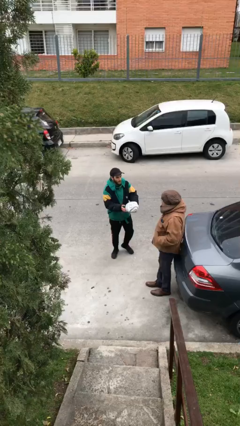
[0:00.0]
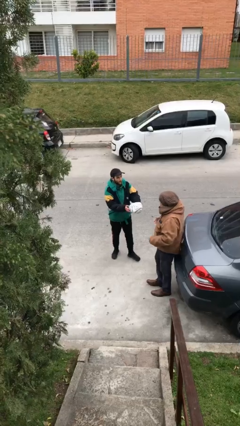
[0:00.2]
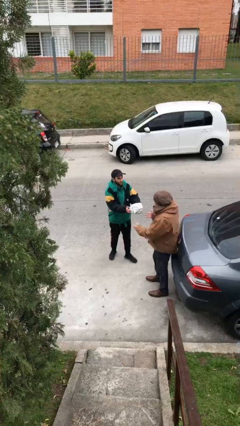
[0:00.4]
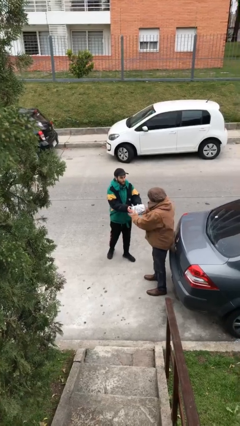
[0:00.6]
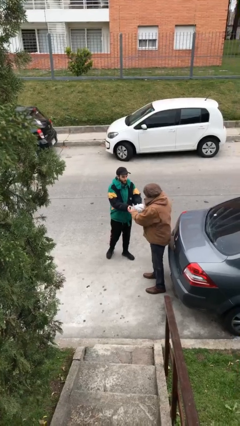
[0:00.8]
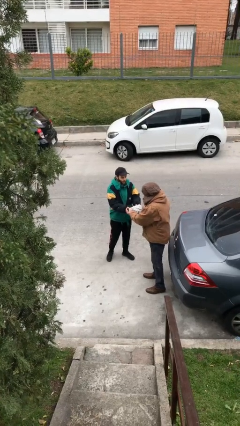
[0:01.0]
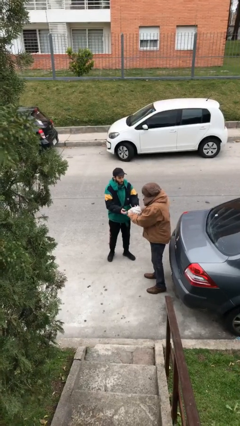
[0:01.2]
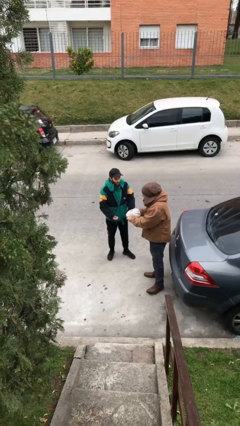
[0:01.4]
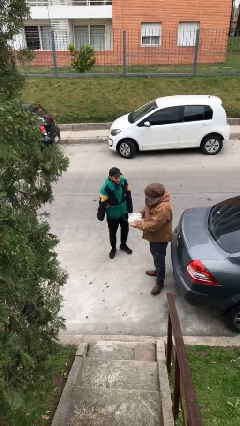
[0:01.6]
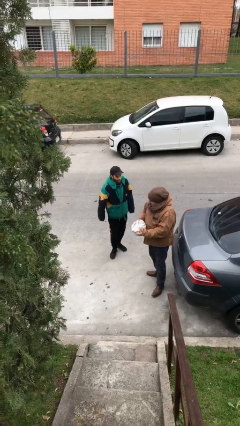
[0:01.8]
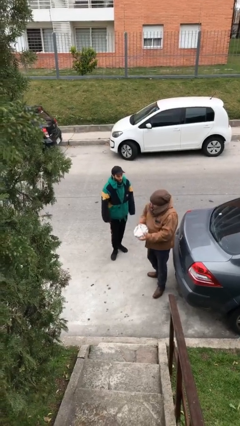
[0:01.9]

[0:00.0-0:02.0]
person transfers object to person

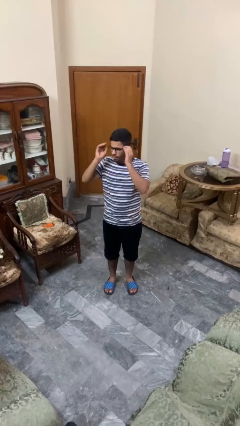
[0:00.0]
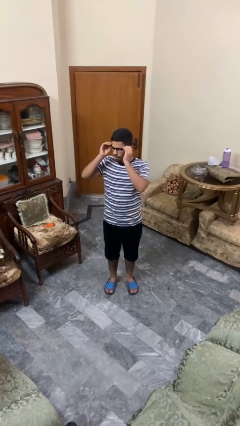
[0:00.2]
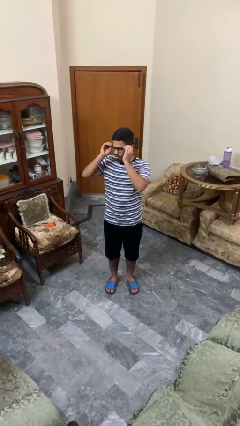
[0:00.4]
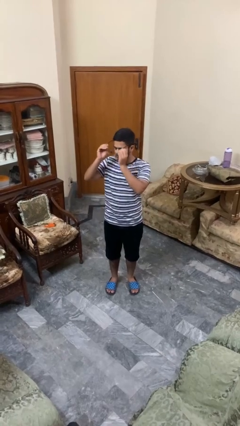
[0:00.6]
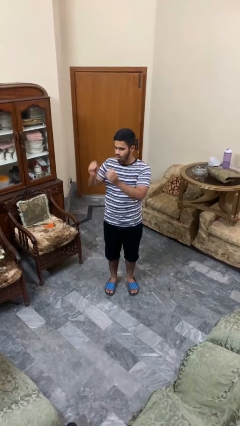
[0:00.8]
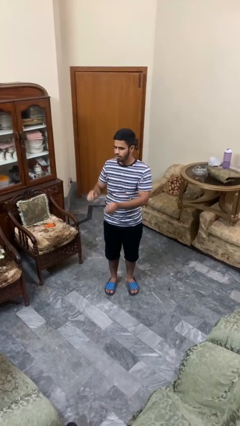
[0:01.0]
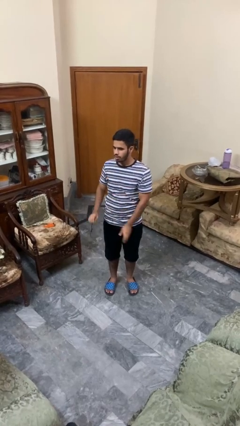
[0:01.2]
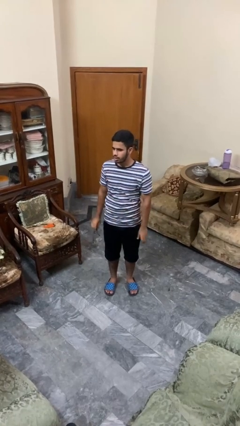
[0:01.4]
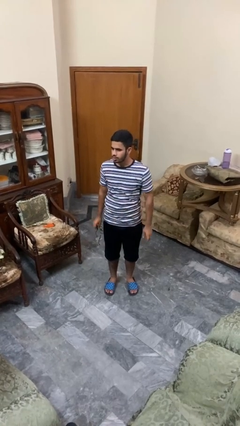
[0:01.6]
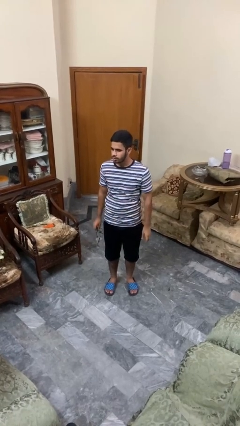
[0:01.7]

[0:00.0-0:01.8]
person takes off glasses

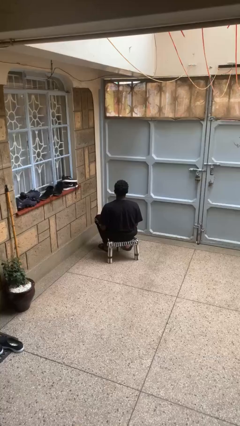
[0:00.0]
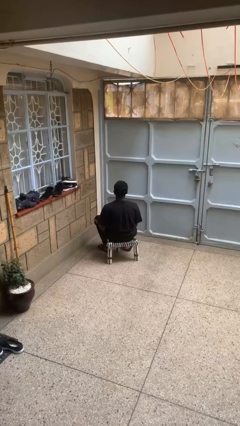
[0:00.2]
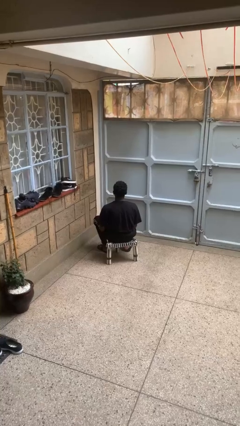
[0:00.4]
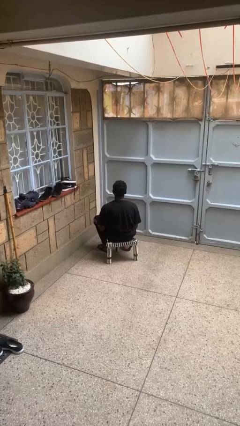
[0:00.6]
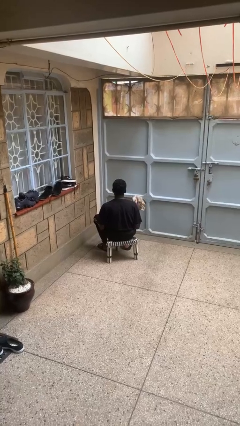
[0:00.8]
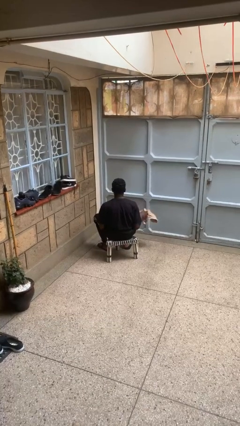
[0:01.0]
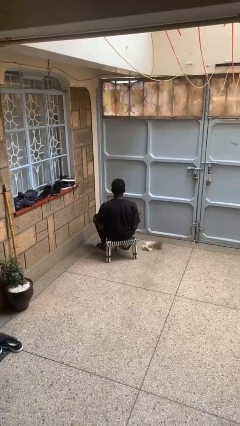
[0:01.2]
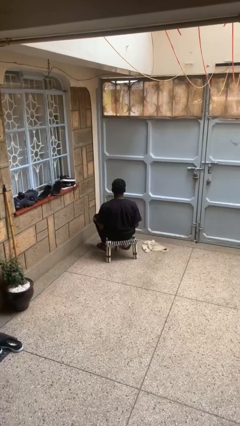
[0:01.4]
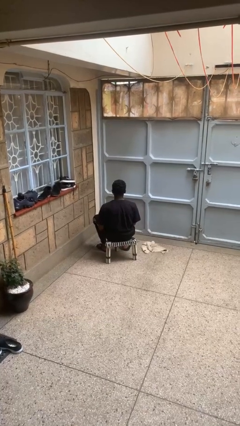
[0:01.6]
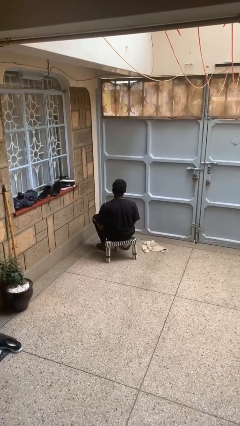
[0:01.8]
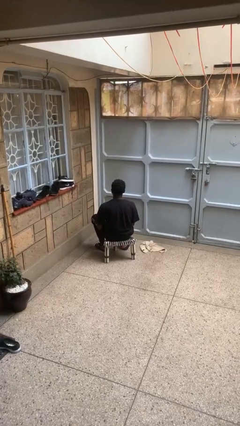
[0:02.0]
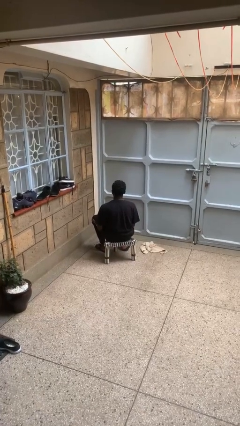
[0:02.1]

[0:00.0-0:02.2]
person throws object to ground

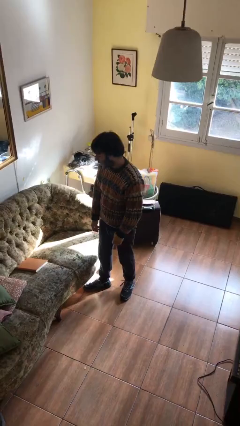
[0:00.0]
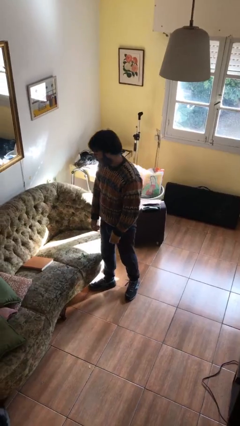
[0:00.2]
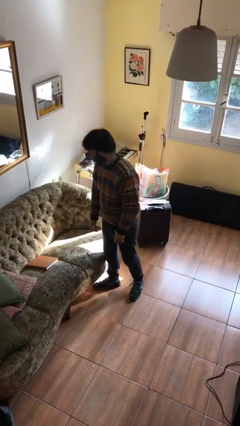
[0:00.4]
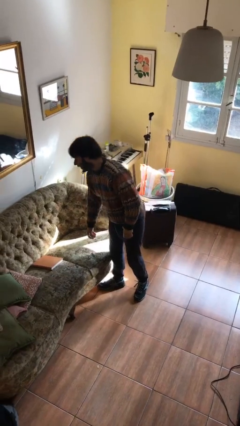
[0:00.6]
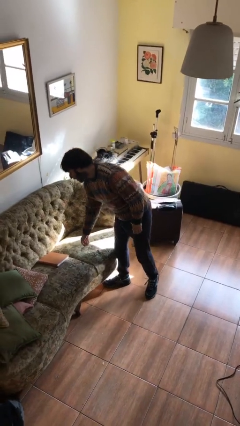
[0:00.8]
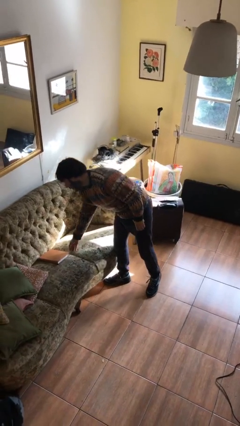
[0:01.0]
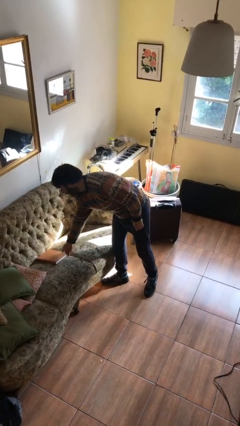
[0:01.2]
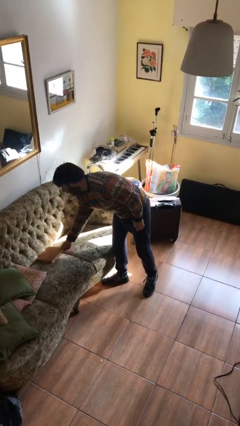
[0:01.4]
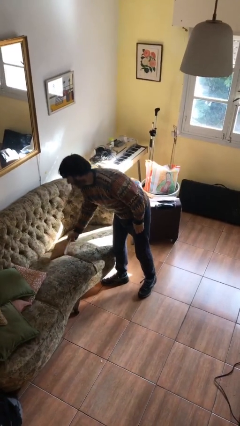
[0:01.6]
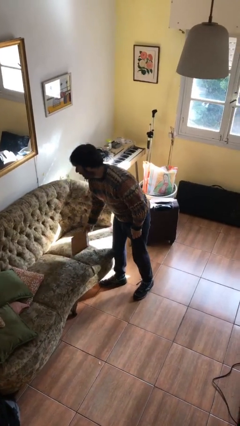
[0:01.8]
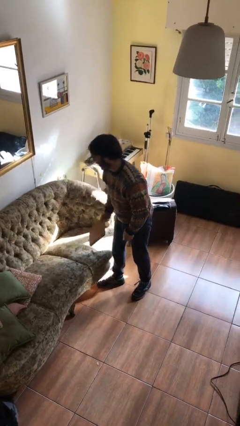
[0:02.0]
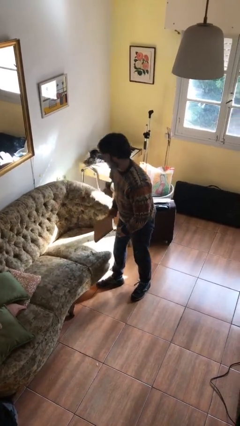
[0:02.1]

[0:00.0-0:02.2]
person picks up object from couch

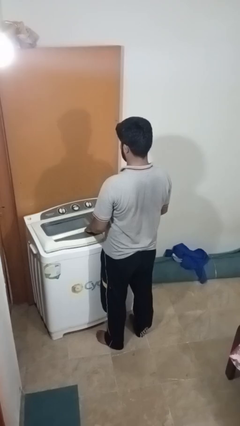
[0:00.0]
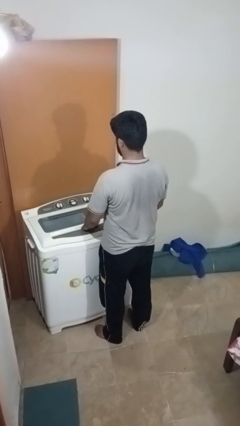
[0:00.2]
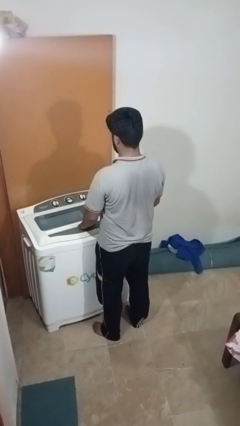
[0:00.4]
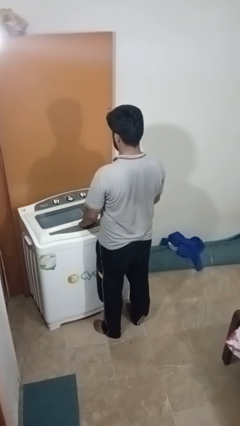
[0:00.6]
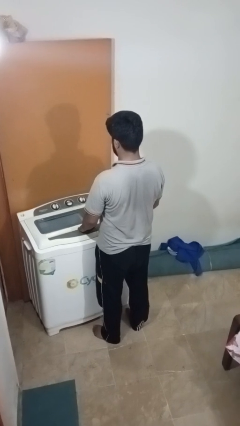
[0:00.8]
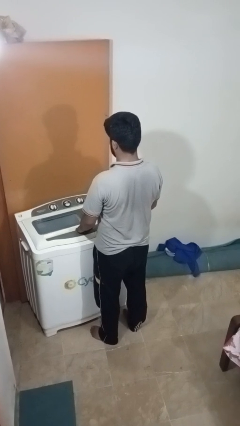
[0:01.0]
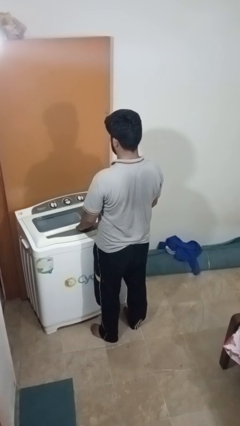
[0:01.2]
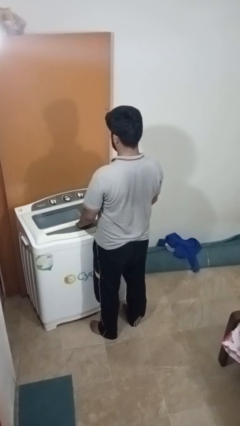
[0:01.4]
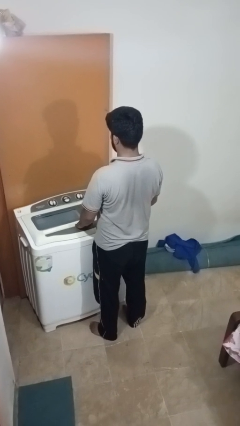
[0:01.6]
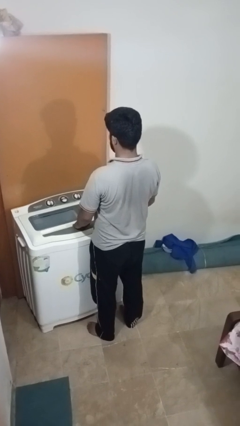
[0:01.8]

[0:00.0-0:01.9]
person closes clothes washer

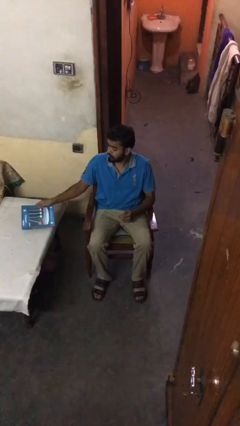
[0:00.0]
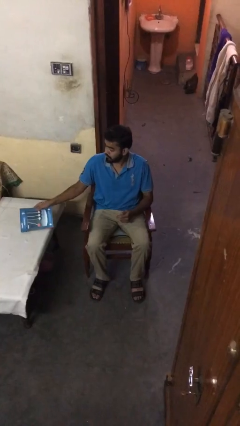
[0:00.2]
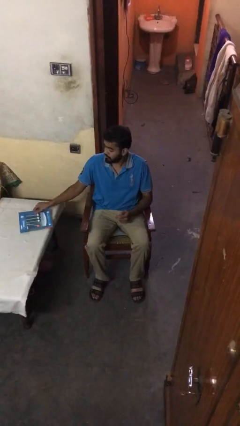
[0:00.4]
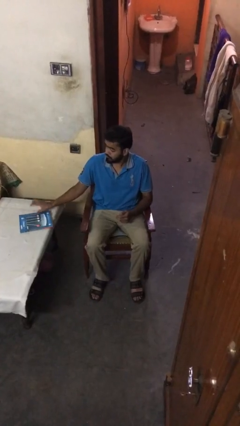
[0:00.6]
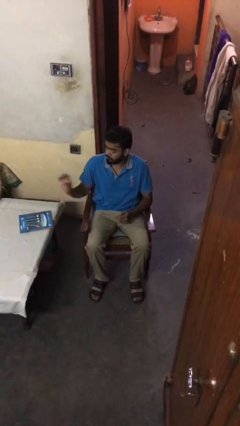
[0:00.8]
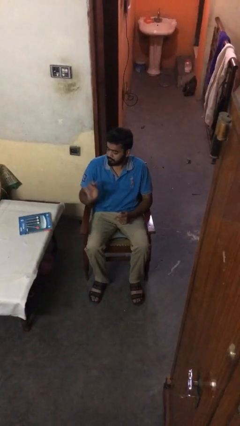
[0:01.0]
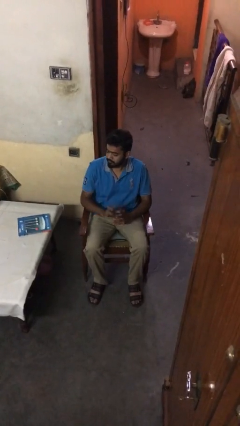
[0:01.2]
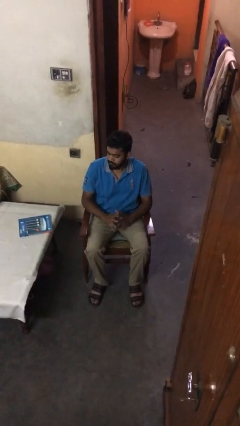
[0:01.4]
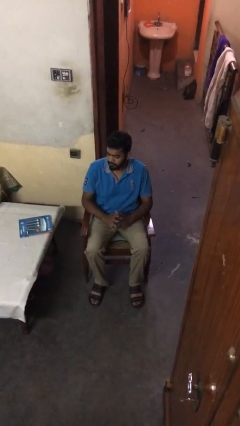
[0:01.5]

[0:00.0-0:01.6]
person puts down object on table

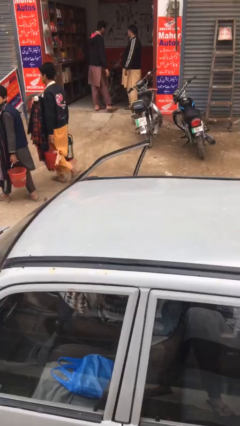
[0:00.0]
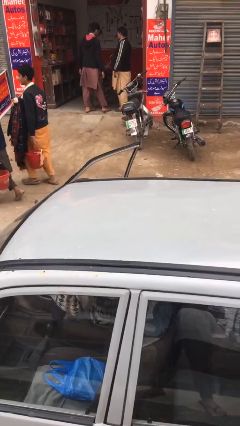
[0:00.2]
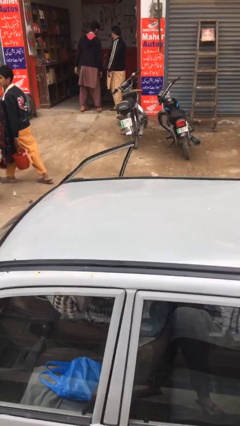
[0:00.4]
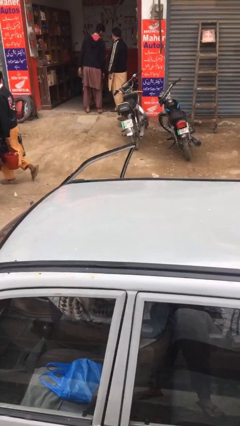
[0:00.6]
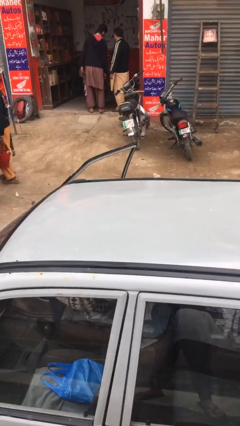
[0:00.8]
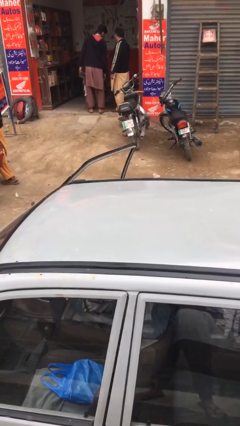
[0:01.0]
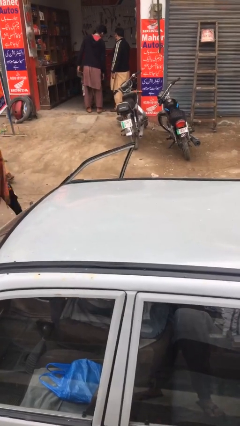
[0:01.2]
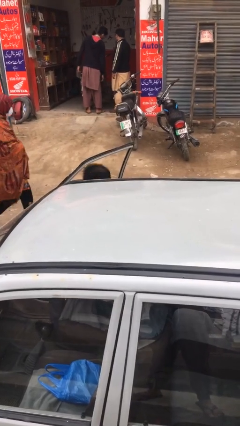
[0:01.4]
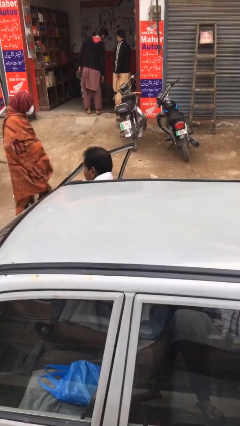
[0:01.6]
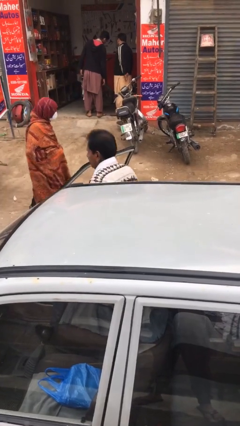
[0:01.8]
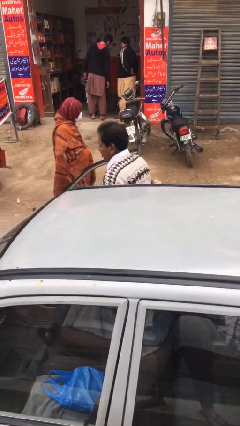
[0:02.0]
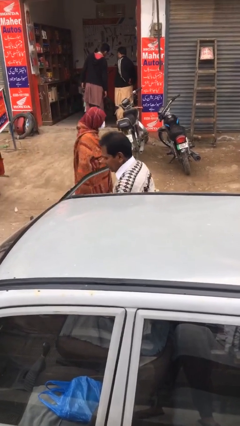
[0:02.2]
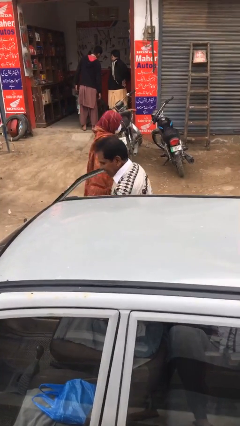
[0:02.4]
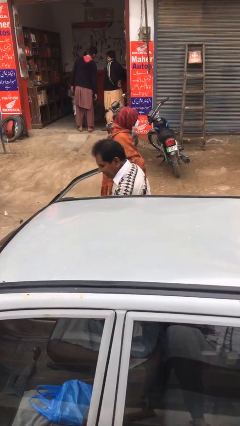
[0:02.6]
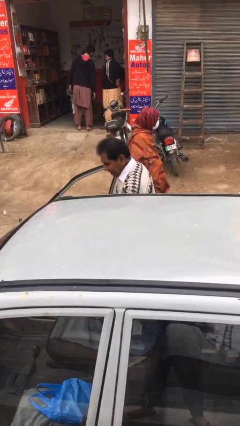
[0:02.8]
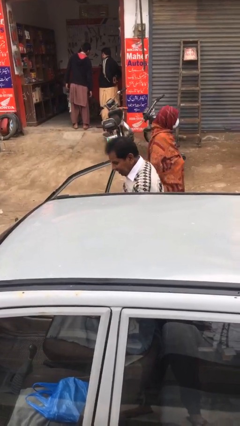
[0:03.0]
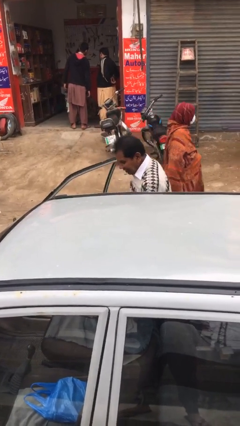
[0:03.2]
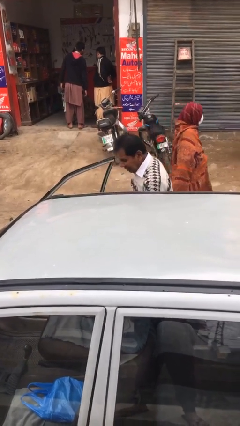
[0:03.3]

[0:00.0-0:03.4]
person exits car

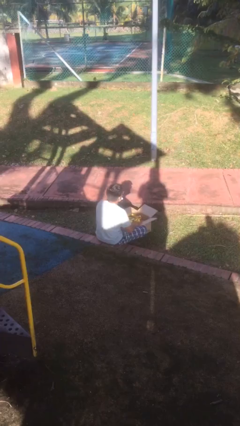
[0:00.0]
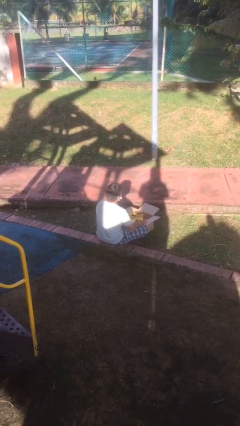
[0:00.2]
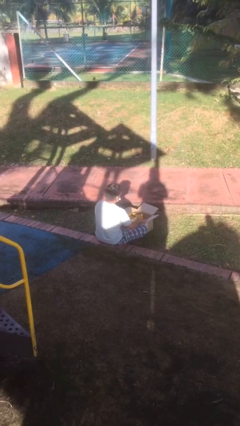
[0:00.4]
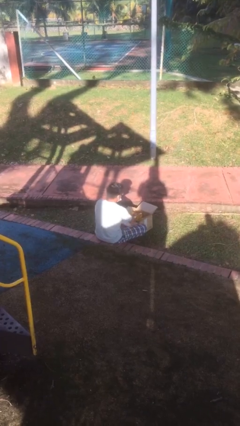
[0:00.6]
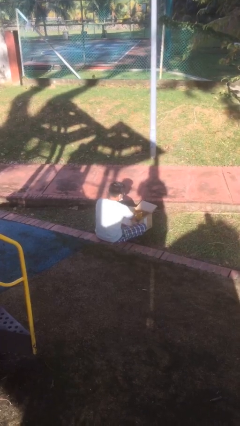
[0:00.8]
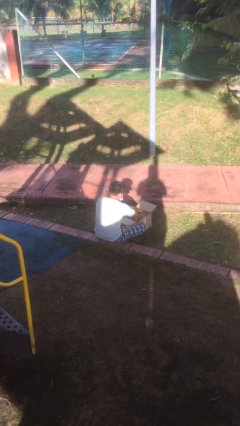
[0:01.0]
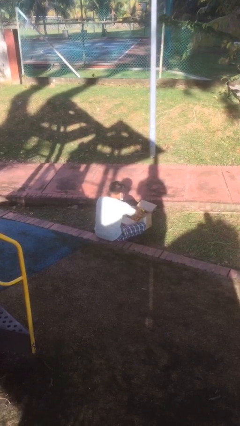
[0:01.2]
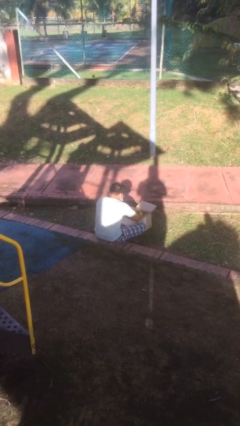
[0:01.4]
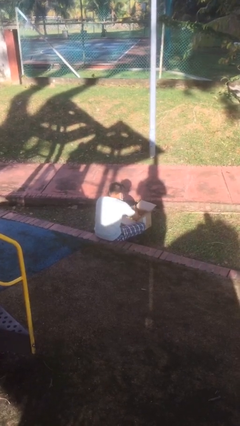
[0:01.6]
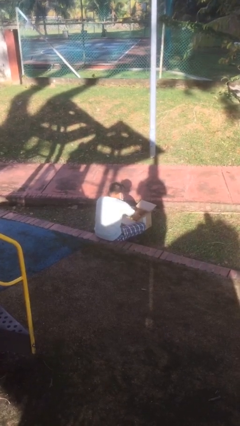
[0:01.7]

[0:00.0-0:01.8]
person searches in box
